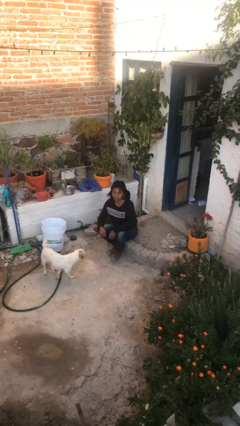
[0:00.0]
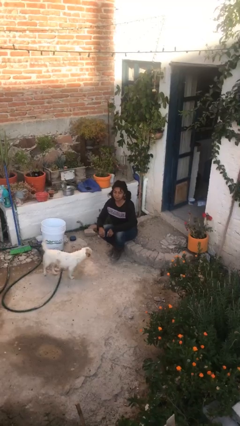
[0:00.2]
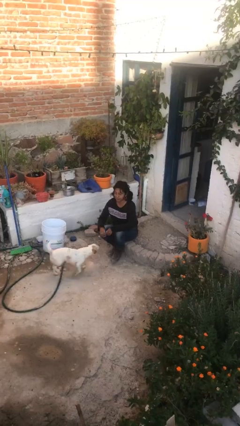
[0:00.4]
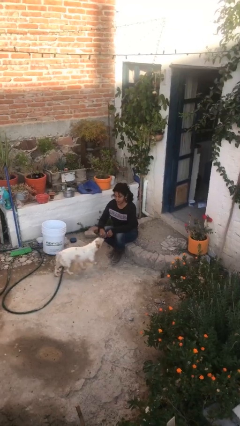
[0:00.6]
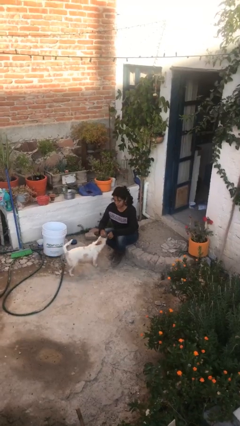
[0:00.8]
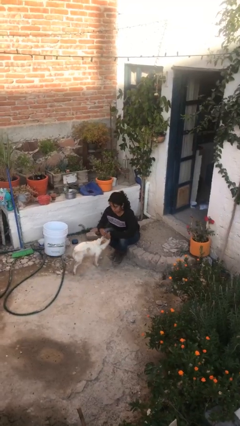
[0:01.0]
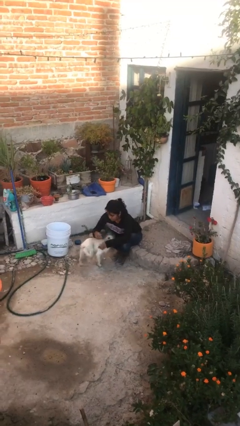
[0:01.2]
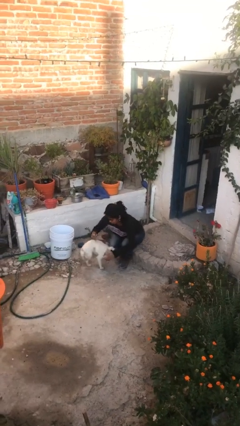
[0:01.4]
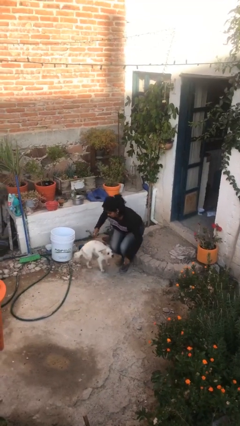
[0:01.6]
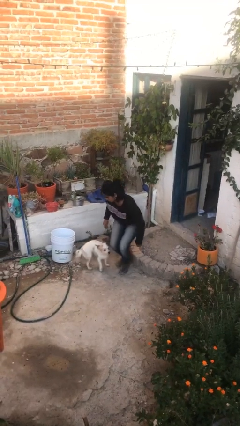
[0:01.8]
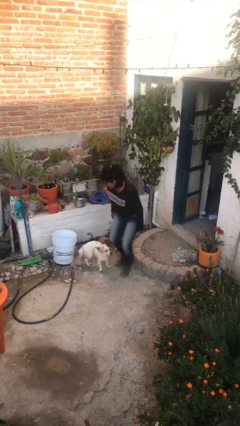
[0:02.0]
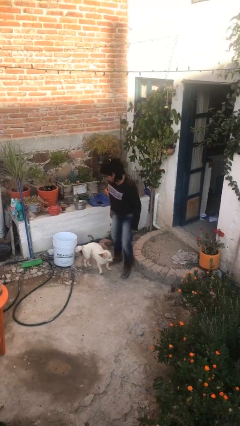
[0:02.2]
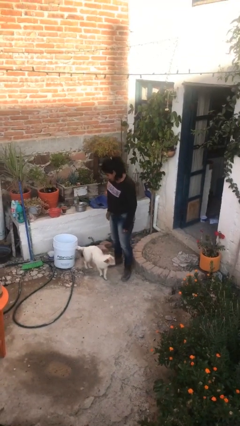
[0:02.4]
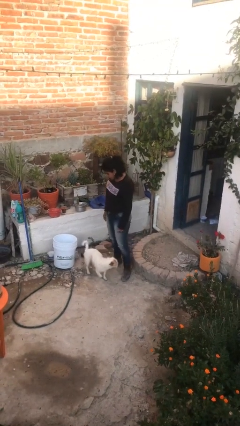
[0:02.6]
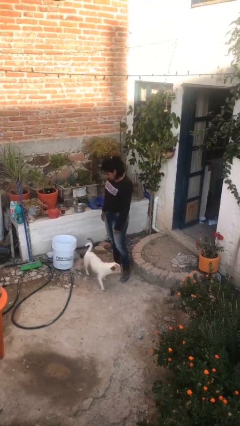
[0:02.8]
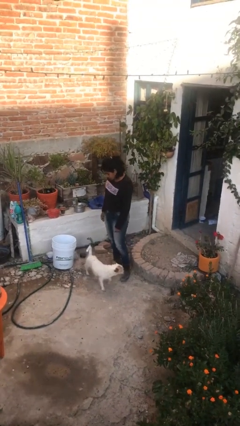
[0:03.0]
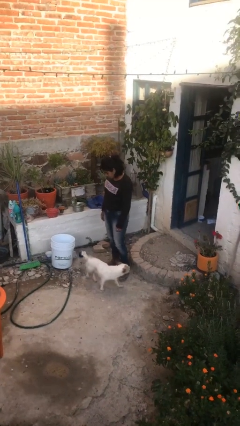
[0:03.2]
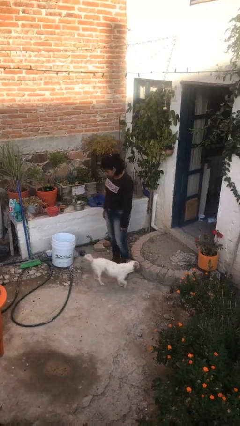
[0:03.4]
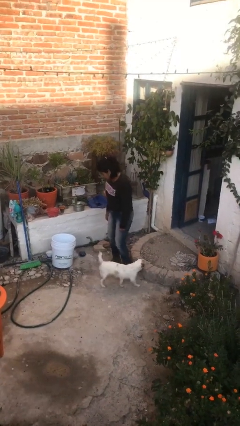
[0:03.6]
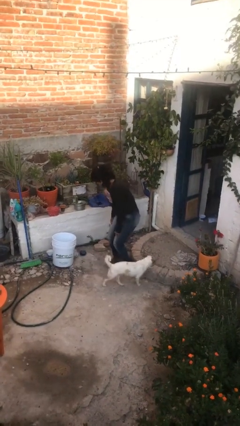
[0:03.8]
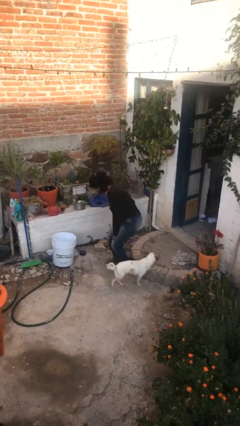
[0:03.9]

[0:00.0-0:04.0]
person stands up

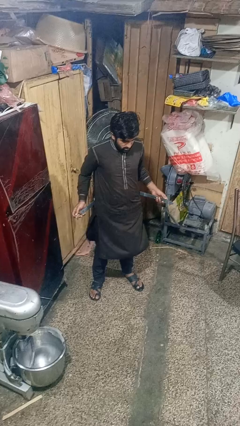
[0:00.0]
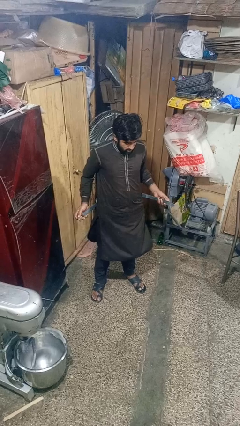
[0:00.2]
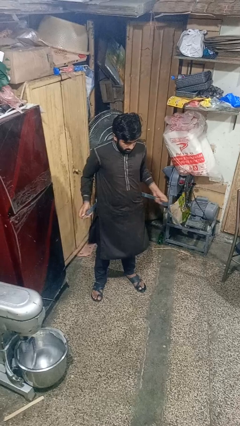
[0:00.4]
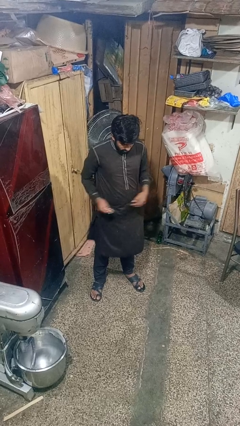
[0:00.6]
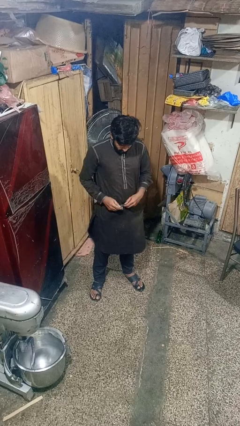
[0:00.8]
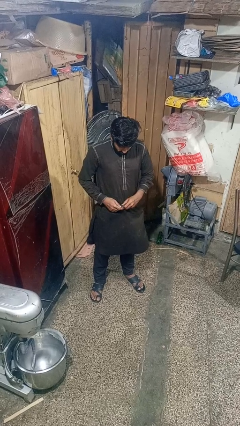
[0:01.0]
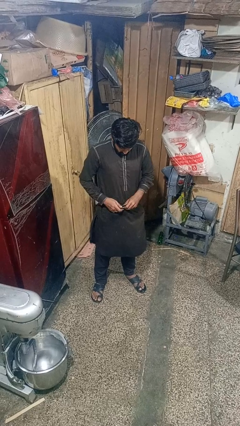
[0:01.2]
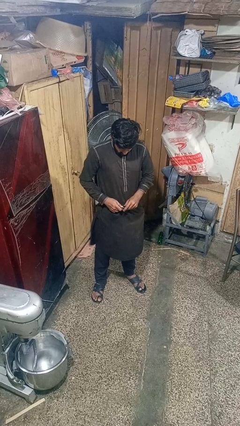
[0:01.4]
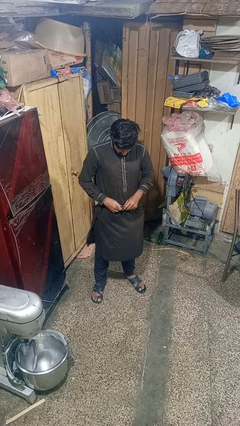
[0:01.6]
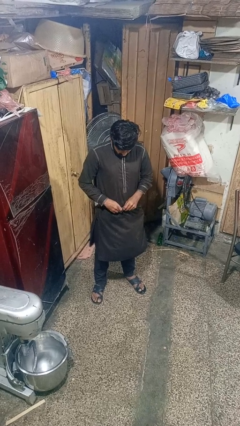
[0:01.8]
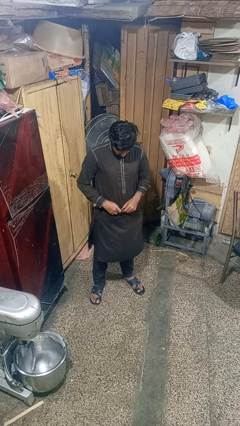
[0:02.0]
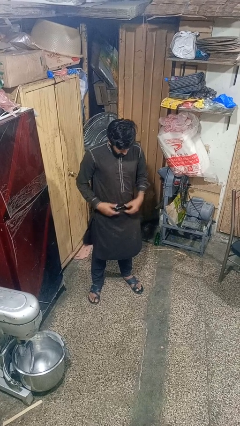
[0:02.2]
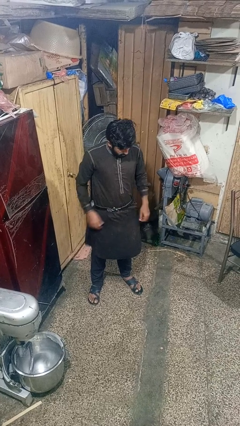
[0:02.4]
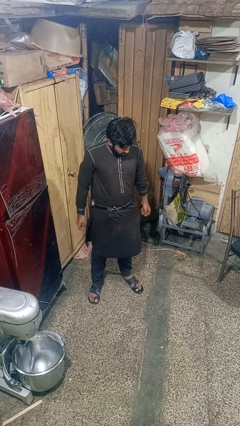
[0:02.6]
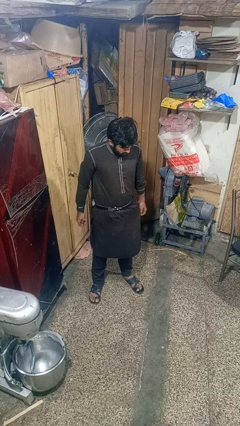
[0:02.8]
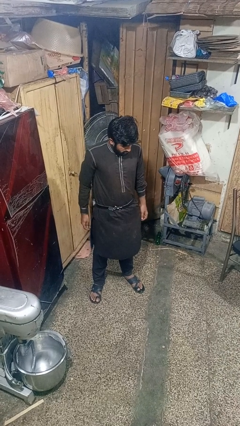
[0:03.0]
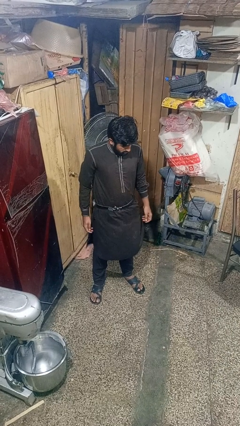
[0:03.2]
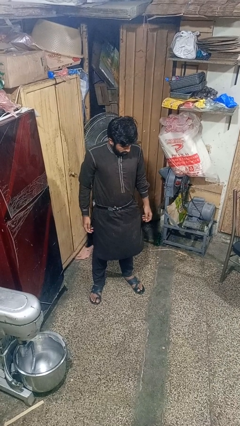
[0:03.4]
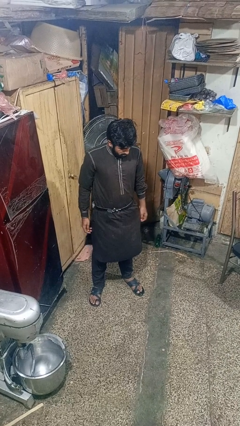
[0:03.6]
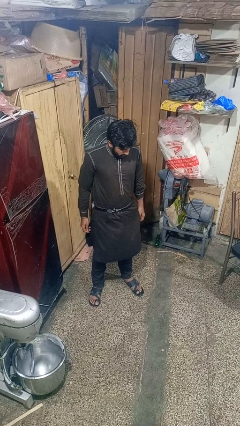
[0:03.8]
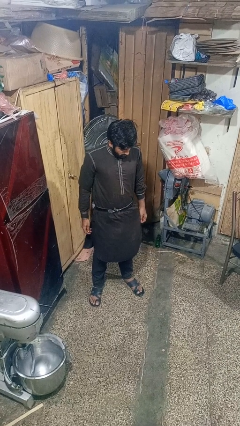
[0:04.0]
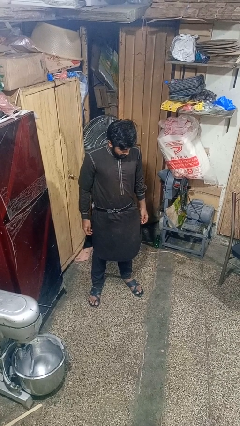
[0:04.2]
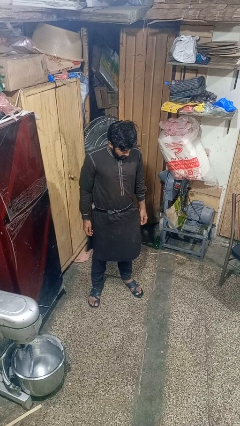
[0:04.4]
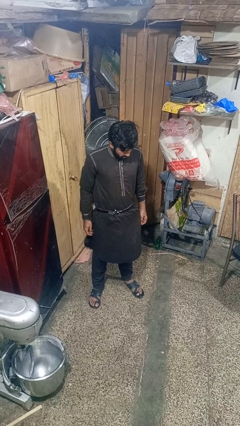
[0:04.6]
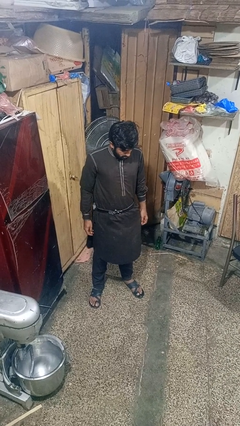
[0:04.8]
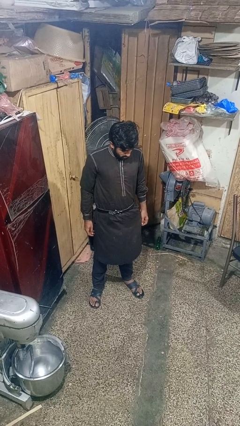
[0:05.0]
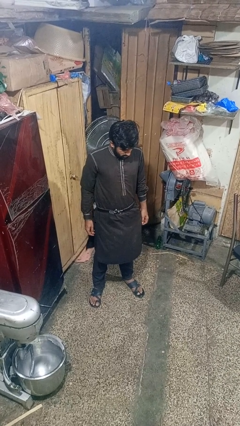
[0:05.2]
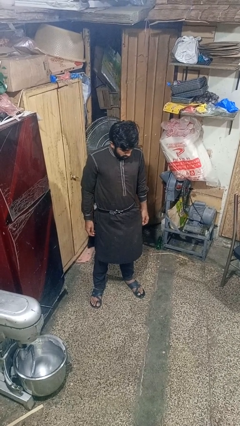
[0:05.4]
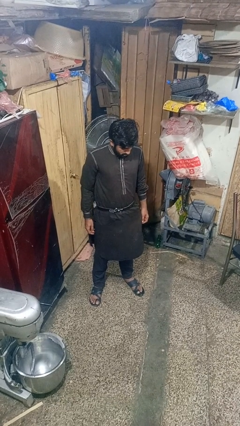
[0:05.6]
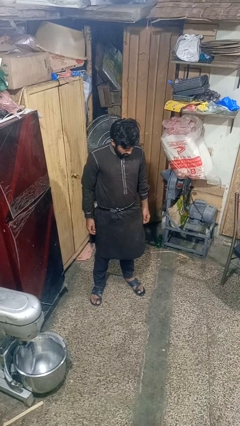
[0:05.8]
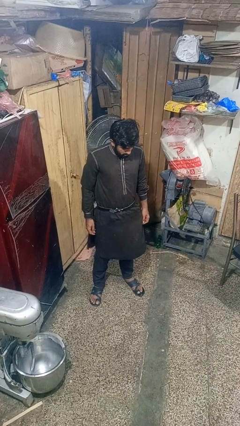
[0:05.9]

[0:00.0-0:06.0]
person puts on belt

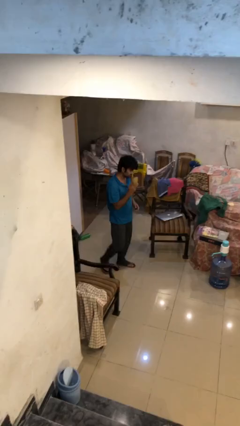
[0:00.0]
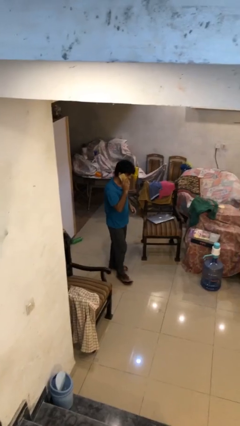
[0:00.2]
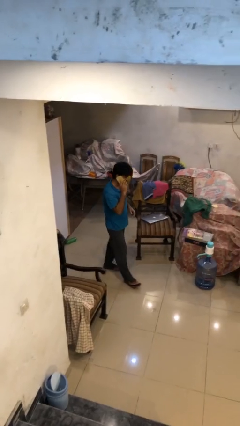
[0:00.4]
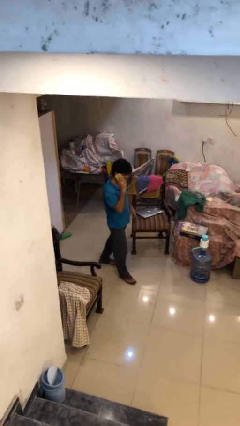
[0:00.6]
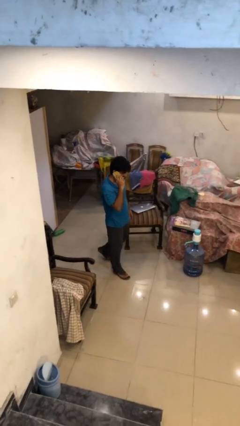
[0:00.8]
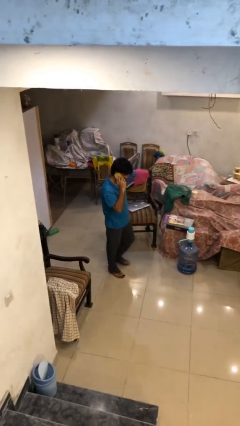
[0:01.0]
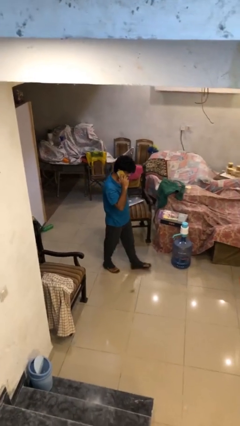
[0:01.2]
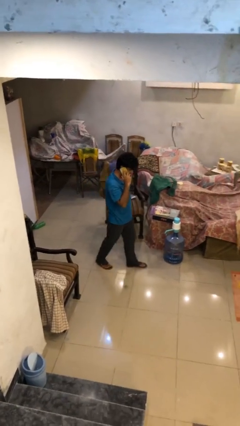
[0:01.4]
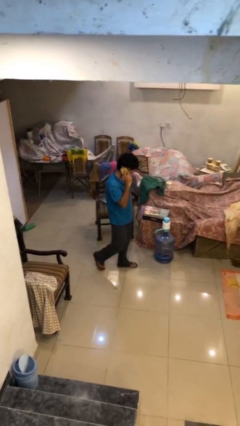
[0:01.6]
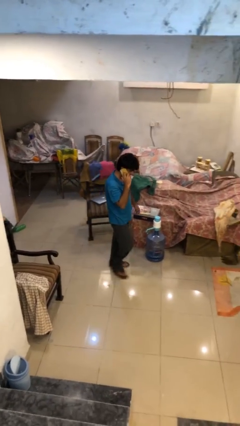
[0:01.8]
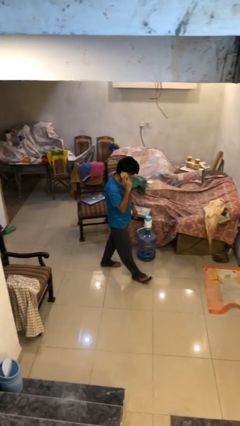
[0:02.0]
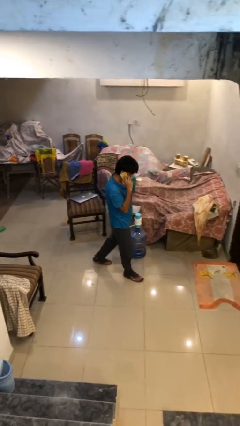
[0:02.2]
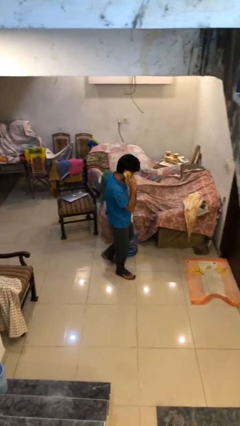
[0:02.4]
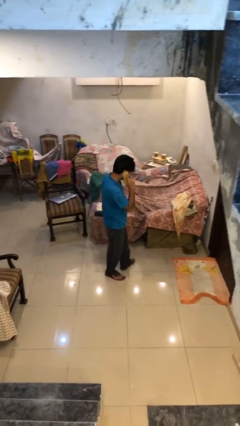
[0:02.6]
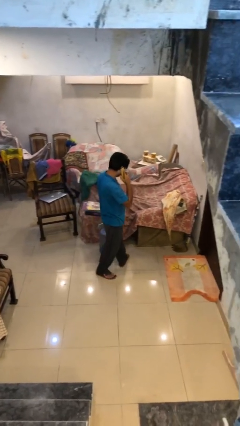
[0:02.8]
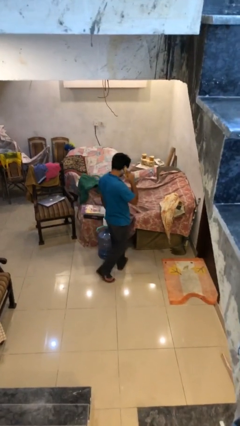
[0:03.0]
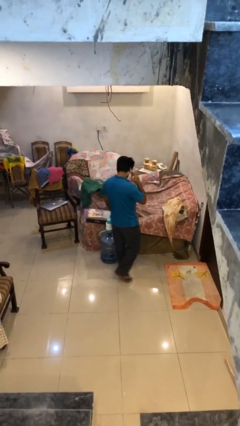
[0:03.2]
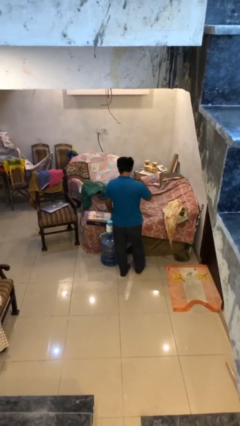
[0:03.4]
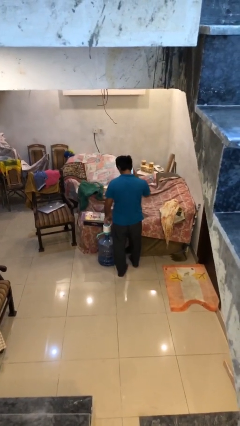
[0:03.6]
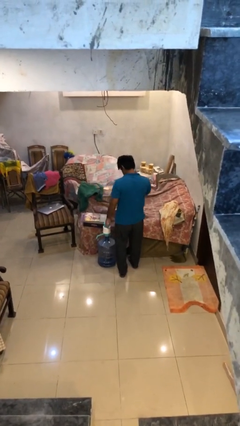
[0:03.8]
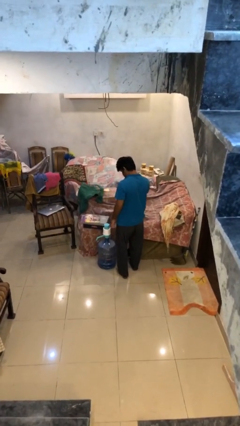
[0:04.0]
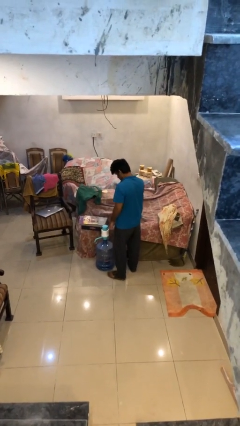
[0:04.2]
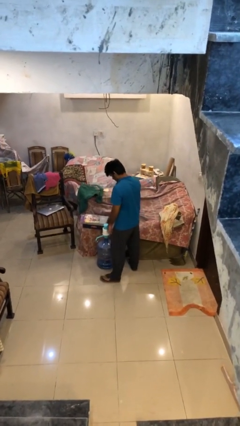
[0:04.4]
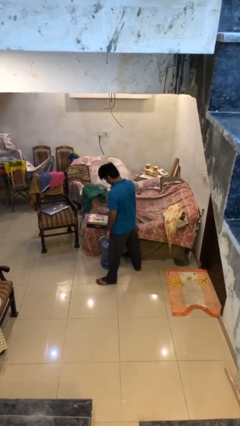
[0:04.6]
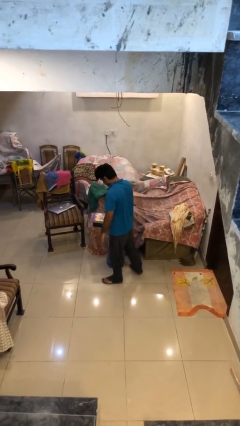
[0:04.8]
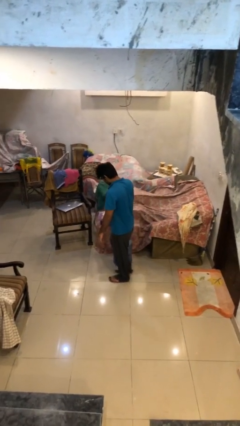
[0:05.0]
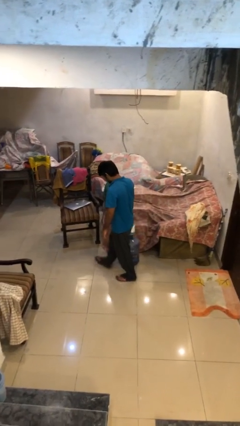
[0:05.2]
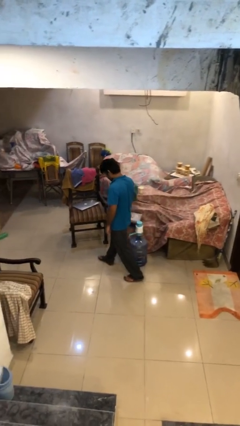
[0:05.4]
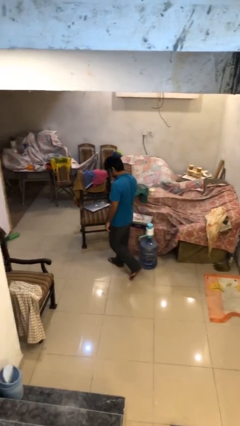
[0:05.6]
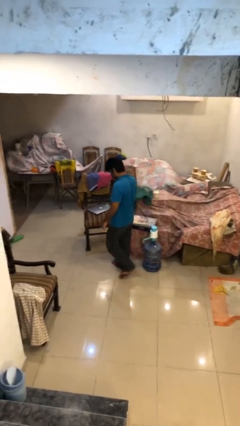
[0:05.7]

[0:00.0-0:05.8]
person talks on phone

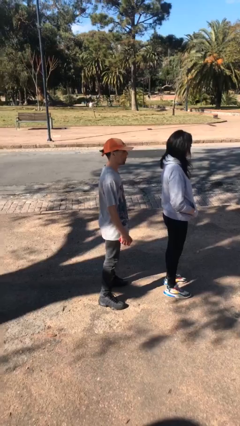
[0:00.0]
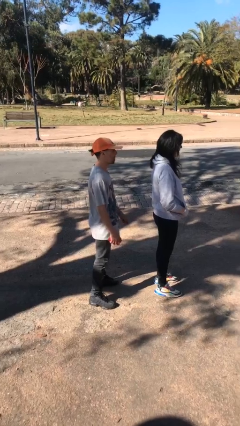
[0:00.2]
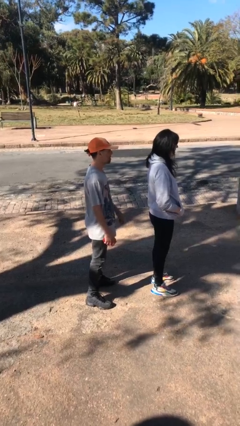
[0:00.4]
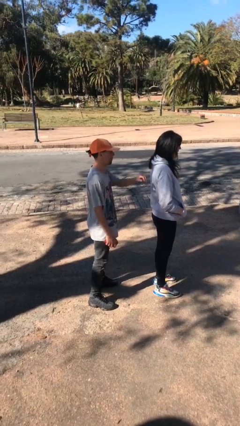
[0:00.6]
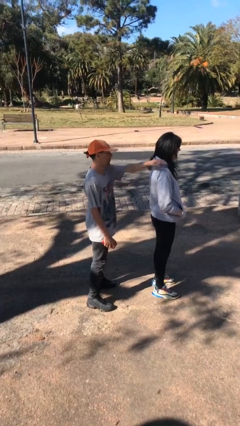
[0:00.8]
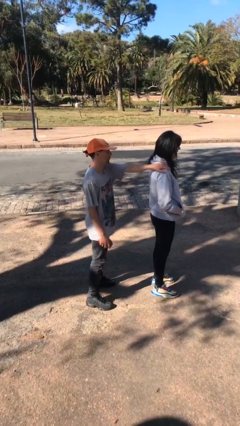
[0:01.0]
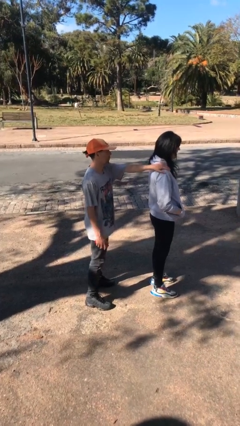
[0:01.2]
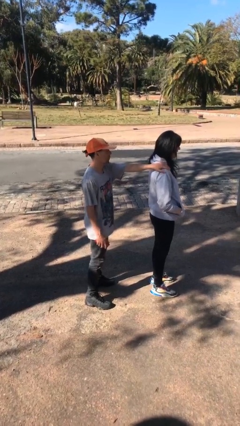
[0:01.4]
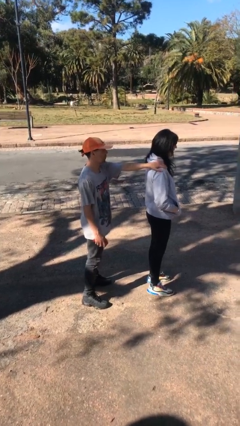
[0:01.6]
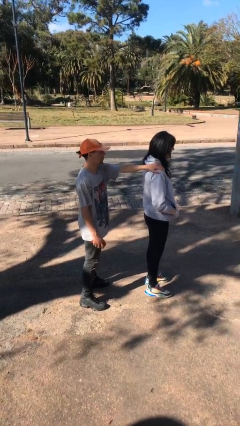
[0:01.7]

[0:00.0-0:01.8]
person grabs person by shoulder
